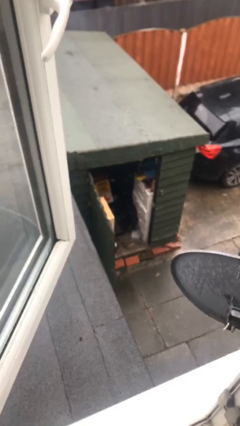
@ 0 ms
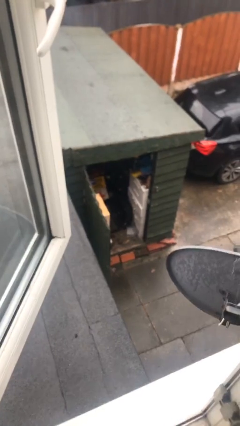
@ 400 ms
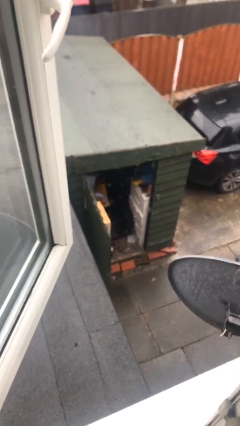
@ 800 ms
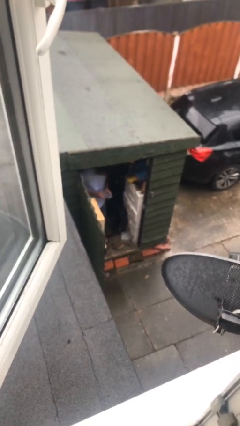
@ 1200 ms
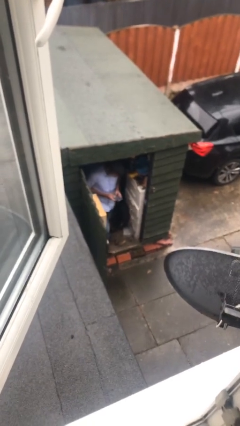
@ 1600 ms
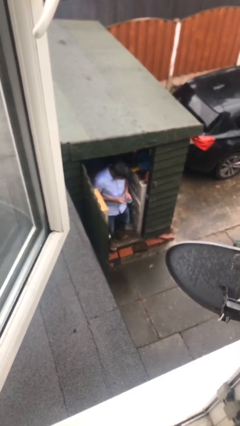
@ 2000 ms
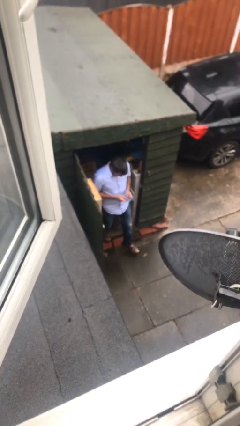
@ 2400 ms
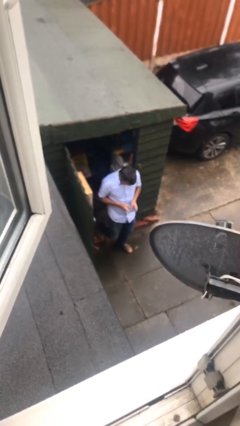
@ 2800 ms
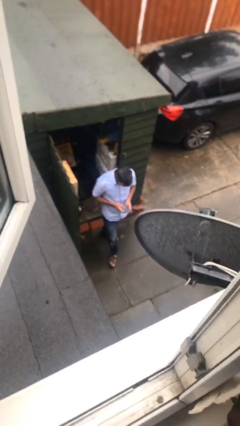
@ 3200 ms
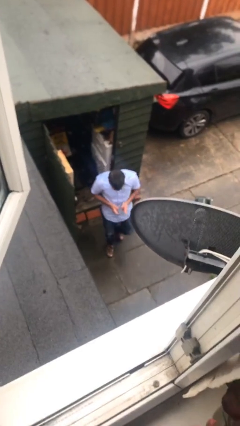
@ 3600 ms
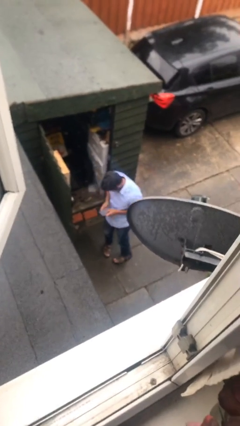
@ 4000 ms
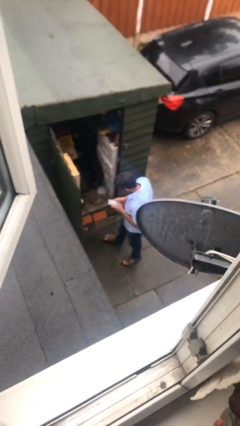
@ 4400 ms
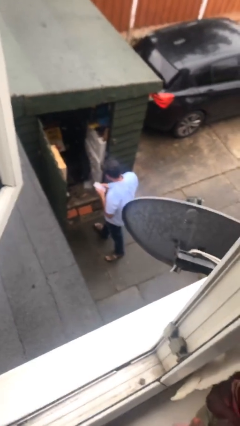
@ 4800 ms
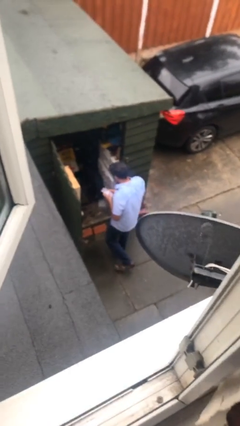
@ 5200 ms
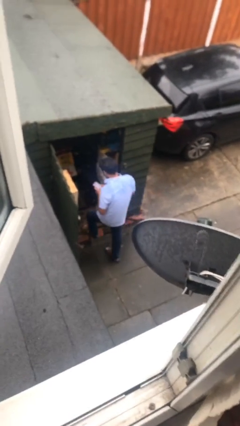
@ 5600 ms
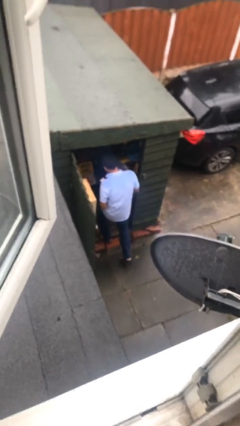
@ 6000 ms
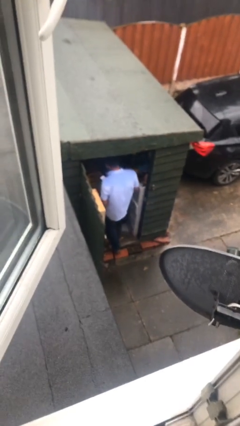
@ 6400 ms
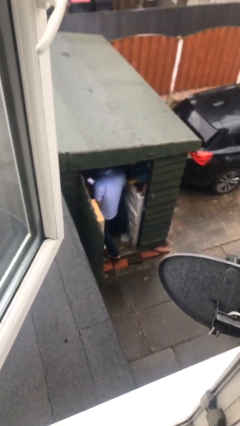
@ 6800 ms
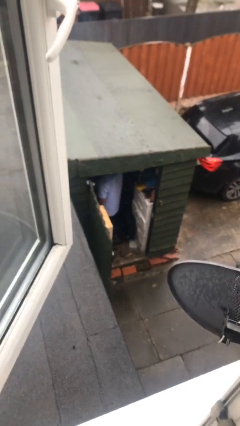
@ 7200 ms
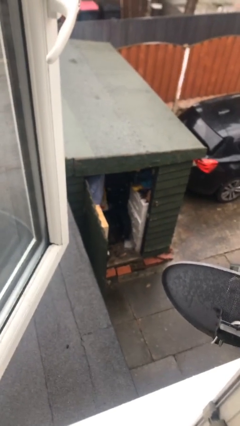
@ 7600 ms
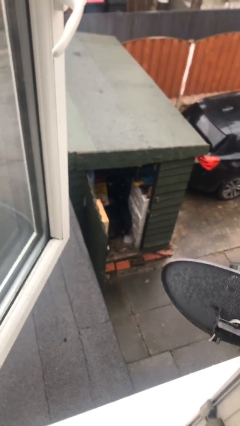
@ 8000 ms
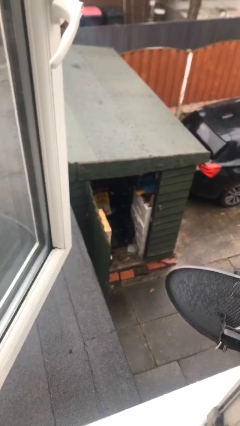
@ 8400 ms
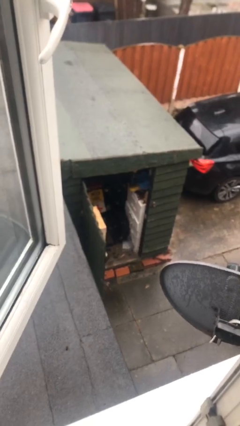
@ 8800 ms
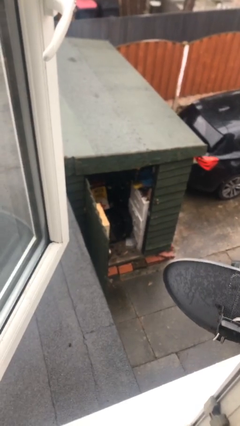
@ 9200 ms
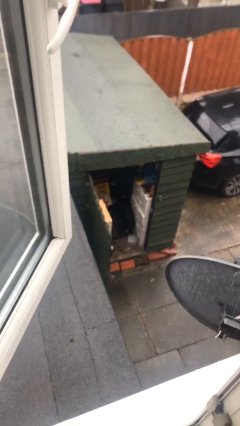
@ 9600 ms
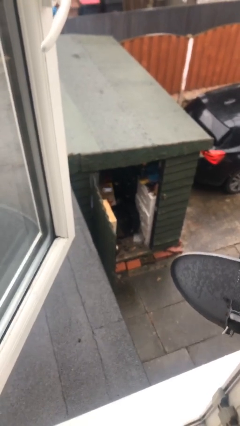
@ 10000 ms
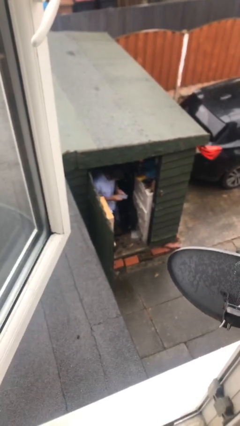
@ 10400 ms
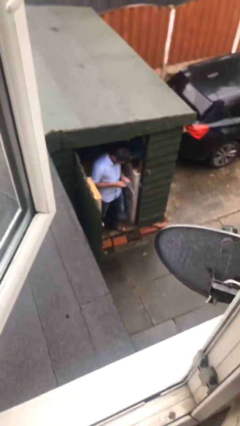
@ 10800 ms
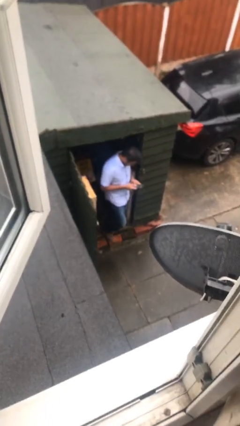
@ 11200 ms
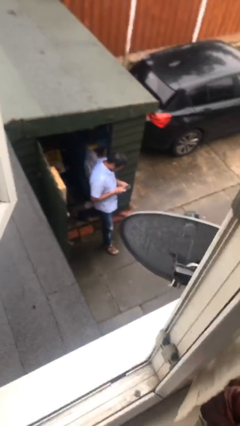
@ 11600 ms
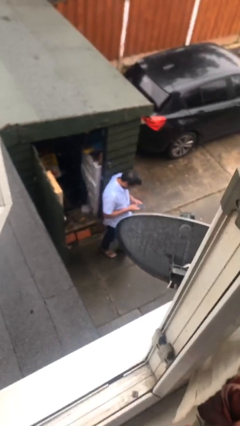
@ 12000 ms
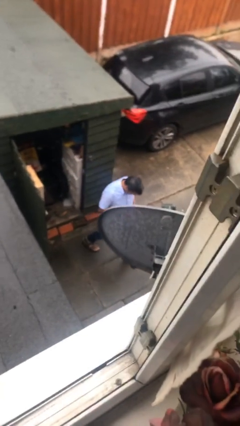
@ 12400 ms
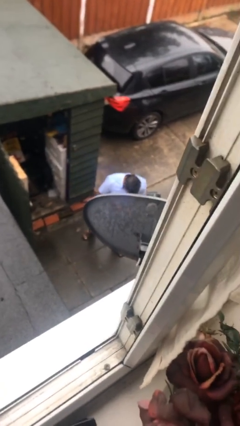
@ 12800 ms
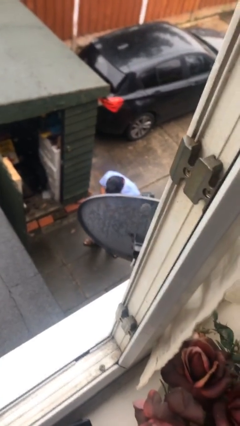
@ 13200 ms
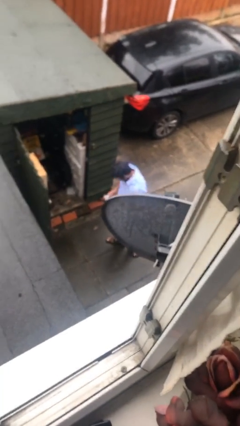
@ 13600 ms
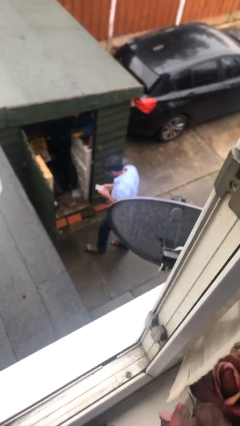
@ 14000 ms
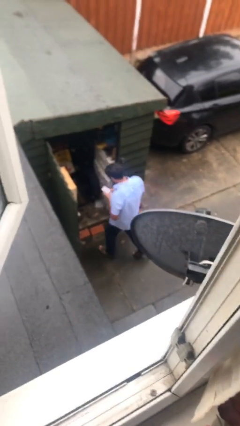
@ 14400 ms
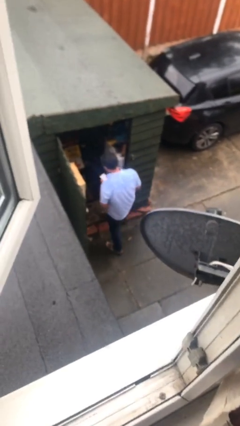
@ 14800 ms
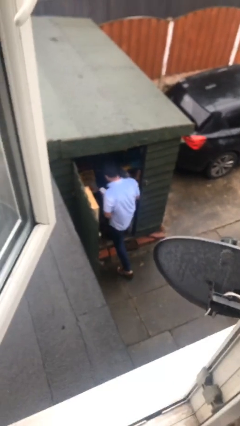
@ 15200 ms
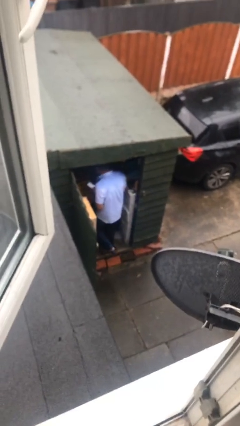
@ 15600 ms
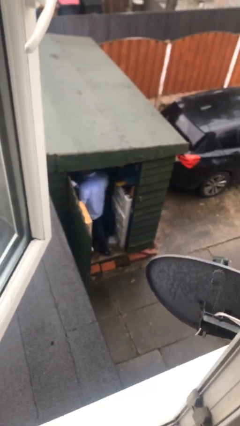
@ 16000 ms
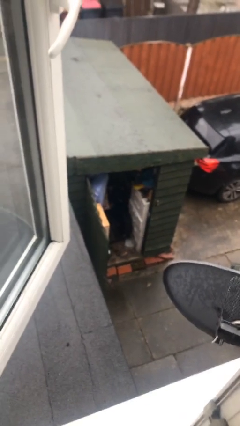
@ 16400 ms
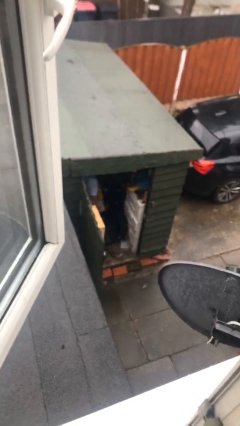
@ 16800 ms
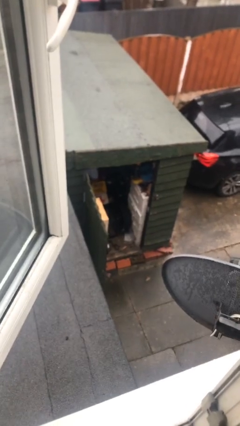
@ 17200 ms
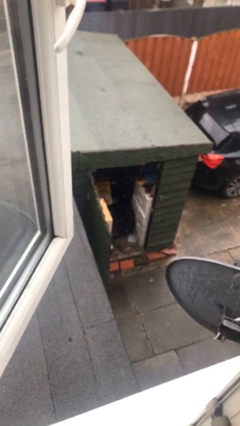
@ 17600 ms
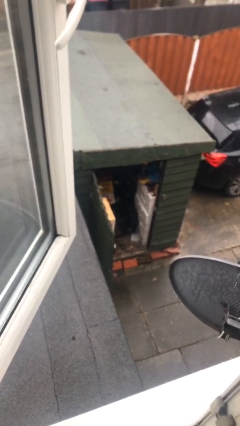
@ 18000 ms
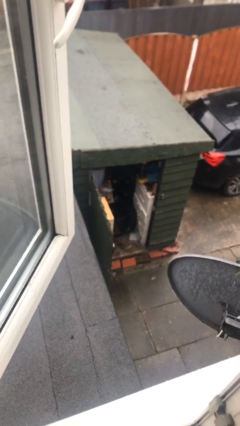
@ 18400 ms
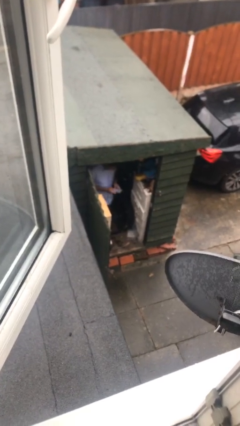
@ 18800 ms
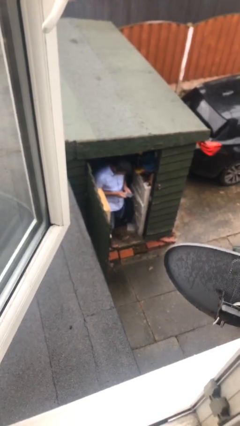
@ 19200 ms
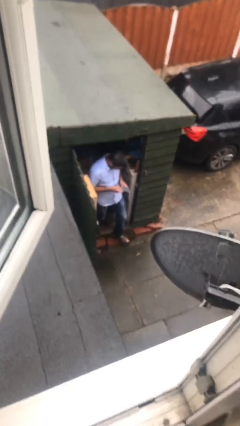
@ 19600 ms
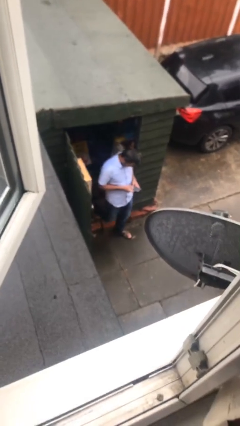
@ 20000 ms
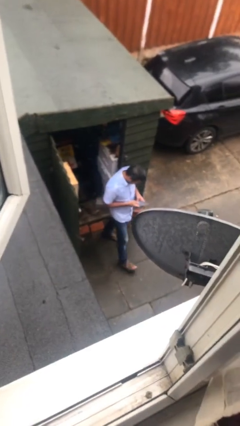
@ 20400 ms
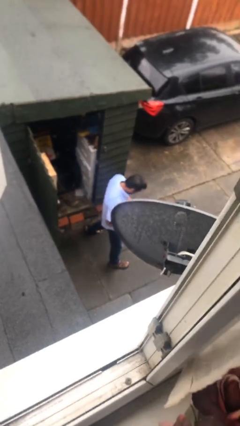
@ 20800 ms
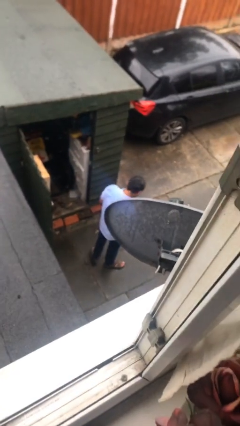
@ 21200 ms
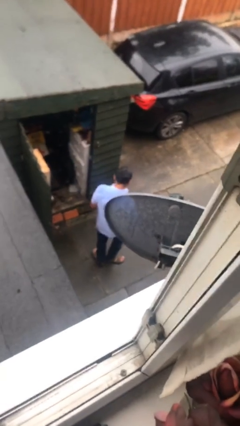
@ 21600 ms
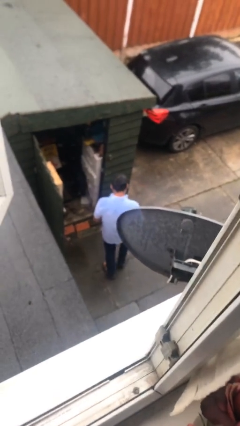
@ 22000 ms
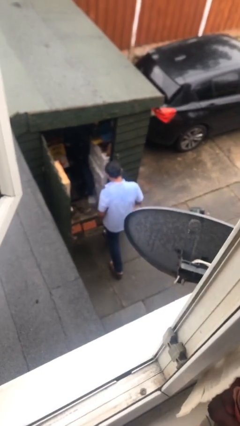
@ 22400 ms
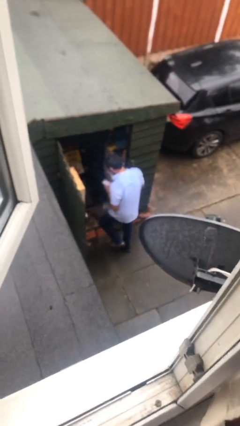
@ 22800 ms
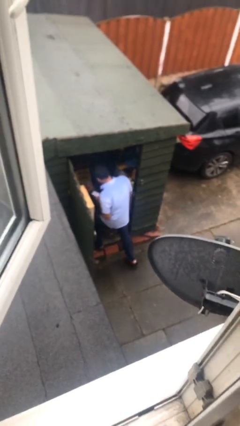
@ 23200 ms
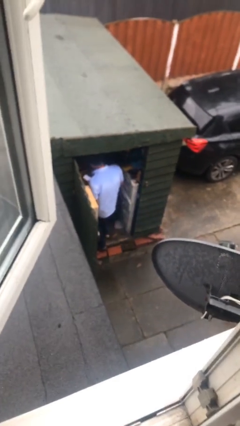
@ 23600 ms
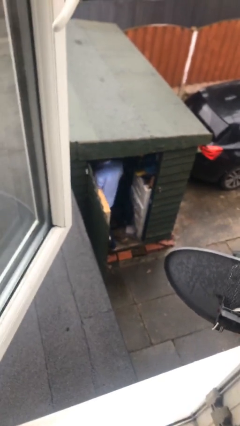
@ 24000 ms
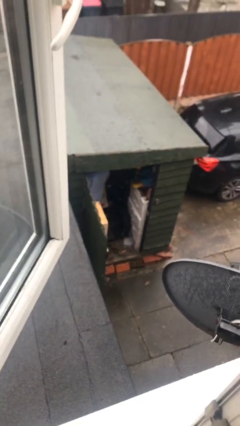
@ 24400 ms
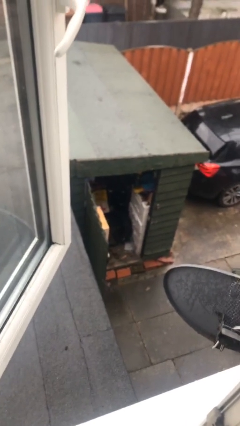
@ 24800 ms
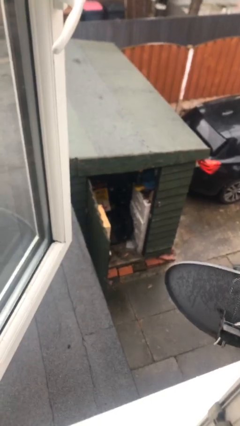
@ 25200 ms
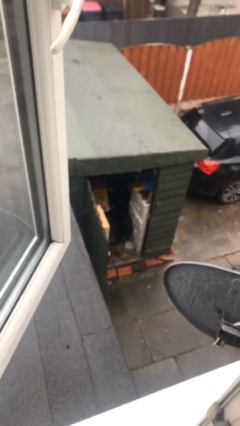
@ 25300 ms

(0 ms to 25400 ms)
person texts on phone

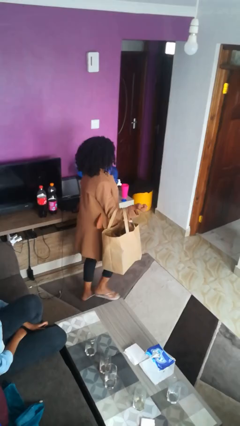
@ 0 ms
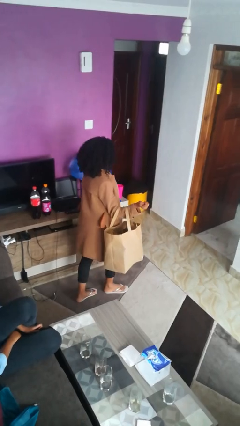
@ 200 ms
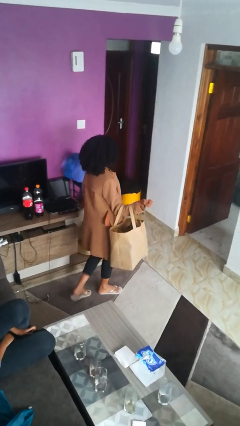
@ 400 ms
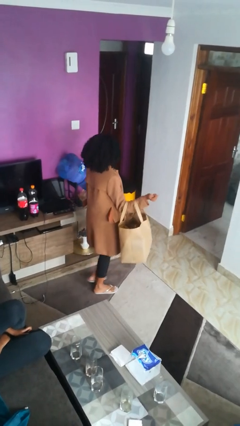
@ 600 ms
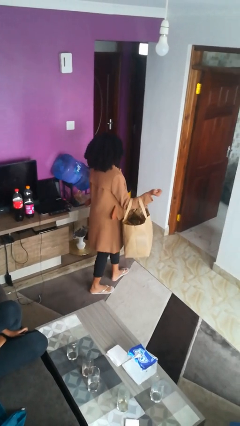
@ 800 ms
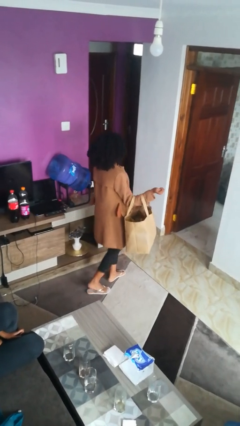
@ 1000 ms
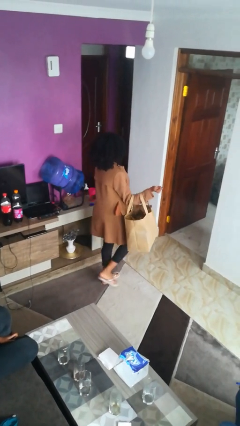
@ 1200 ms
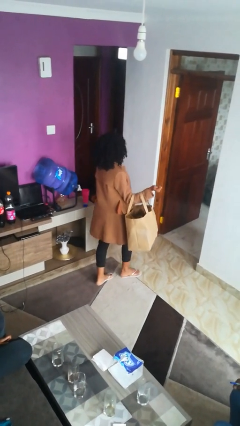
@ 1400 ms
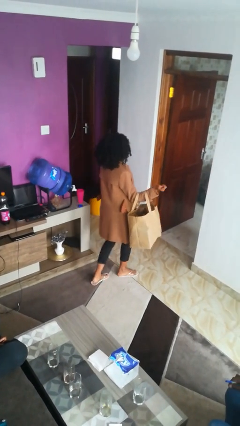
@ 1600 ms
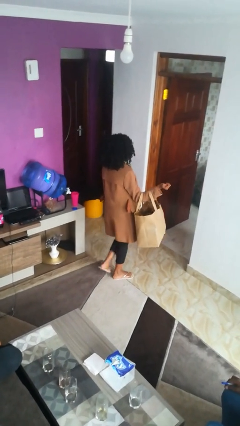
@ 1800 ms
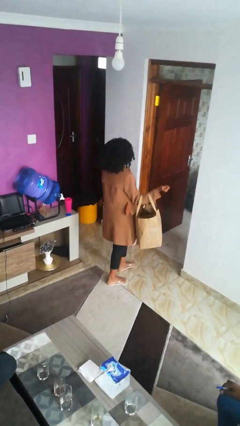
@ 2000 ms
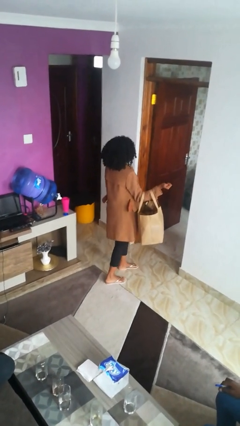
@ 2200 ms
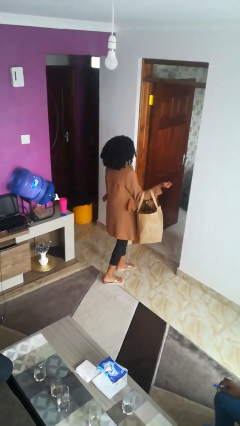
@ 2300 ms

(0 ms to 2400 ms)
person carries groceries

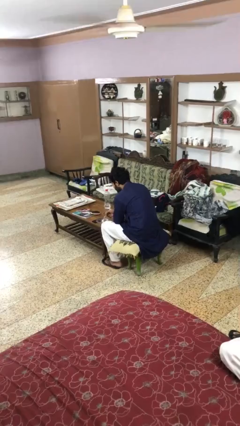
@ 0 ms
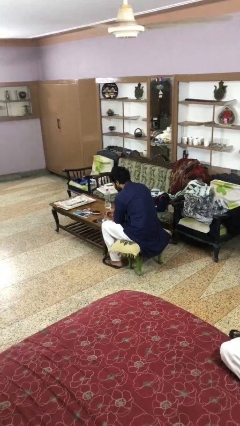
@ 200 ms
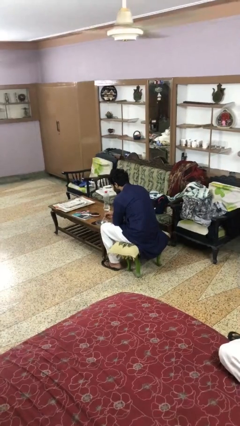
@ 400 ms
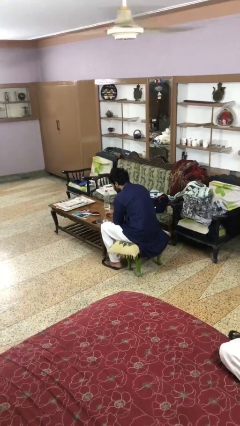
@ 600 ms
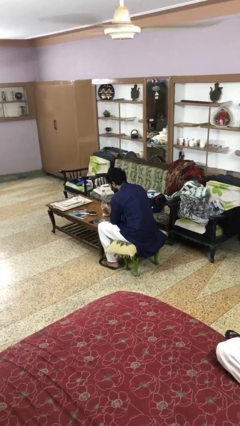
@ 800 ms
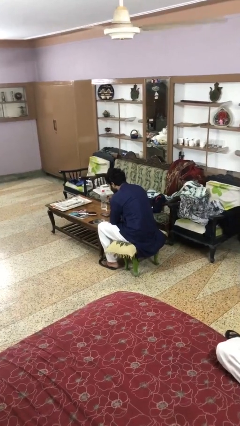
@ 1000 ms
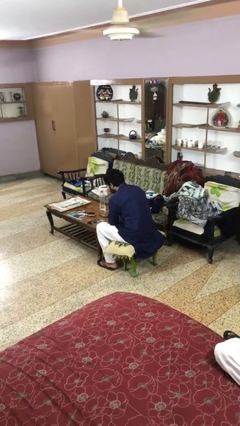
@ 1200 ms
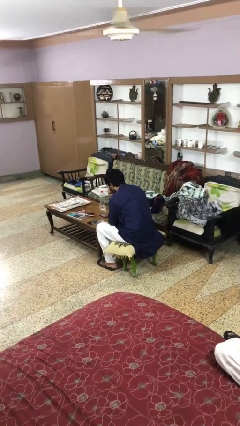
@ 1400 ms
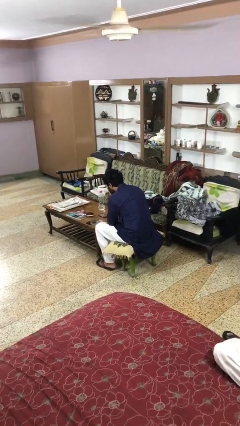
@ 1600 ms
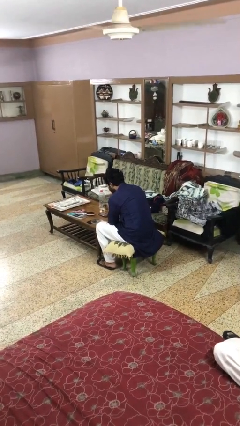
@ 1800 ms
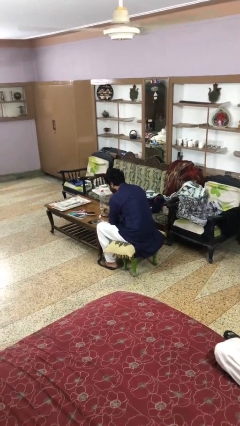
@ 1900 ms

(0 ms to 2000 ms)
person eats with utensil

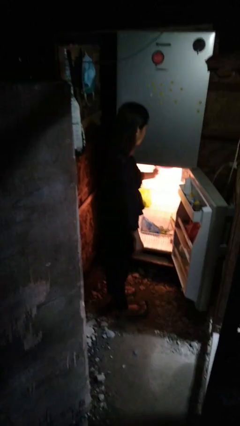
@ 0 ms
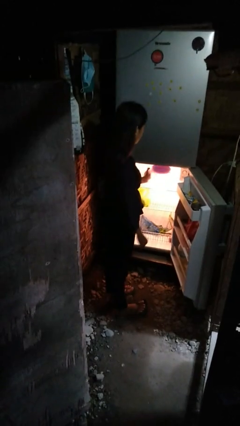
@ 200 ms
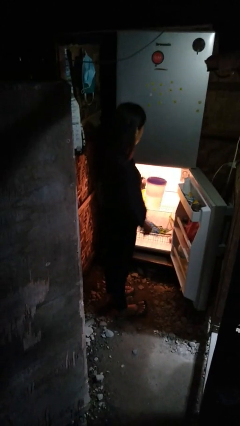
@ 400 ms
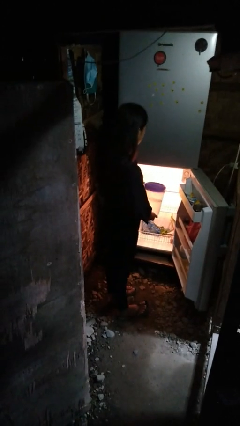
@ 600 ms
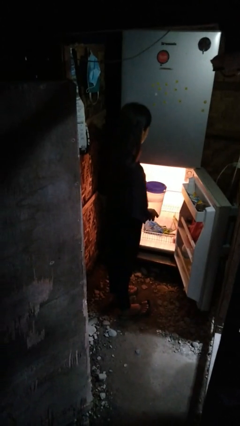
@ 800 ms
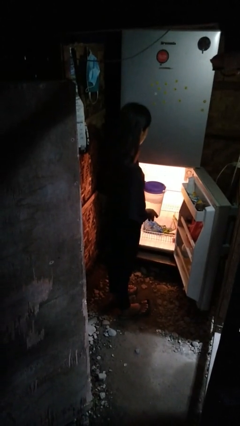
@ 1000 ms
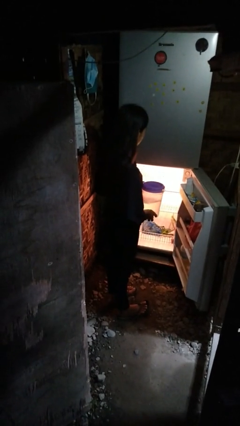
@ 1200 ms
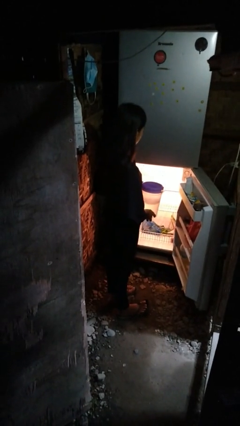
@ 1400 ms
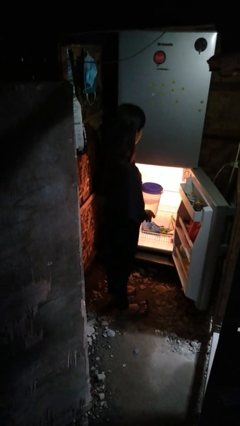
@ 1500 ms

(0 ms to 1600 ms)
person takes object from refrigerator